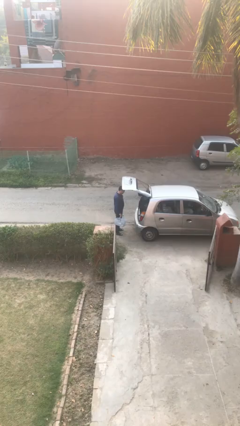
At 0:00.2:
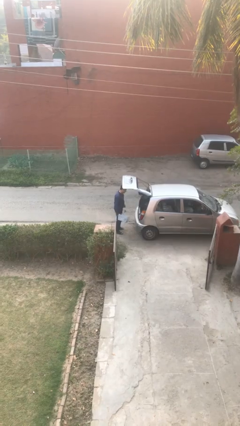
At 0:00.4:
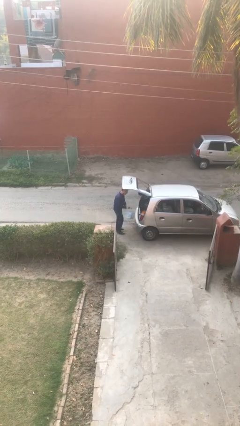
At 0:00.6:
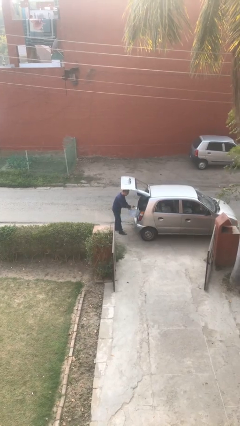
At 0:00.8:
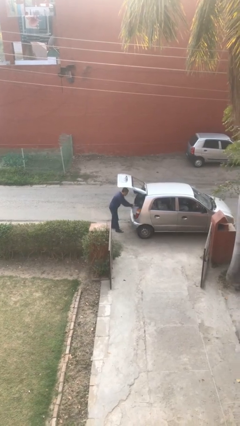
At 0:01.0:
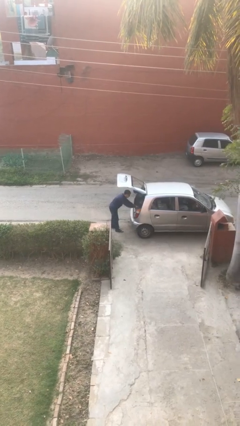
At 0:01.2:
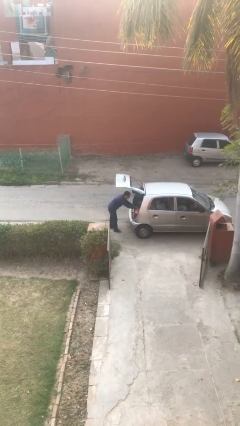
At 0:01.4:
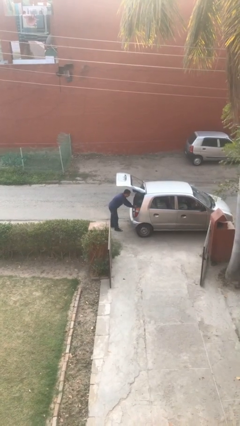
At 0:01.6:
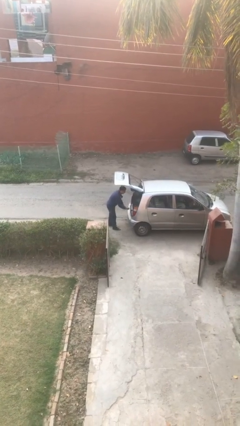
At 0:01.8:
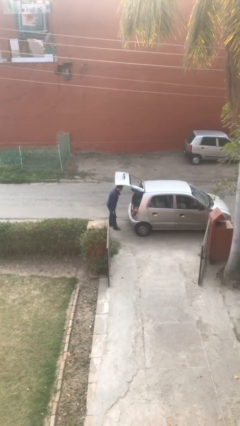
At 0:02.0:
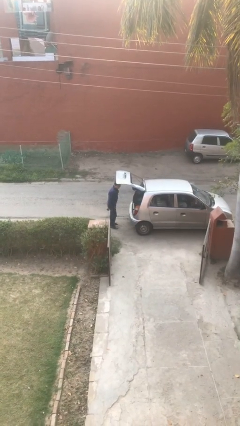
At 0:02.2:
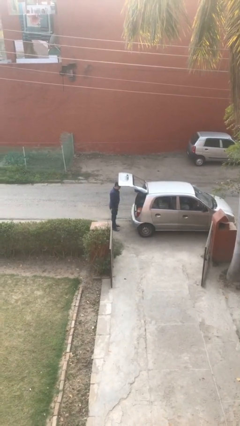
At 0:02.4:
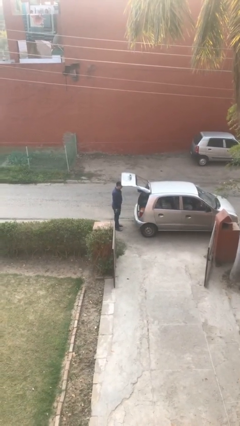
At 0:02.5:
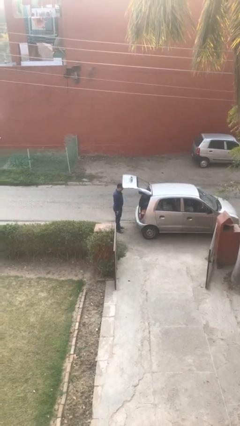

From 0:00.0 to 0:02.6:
person loads car

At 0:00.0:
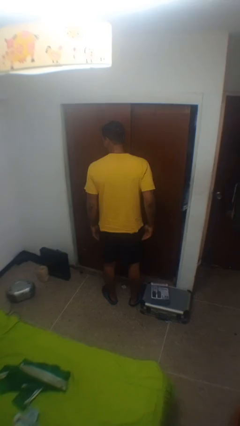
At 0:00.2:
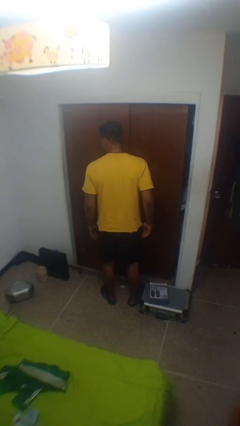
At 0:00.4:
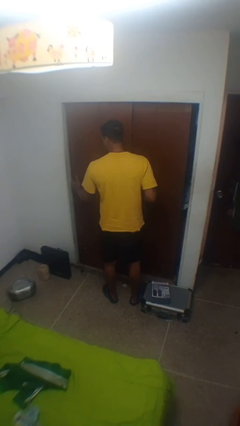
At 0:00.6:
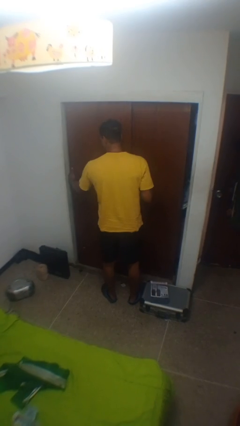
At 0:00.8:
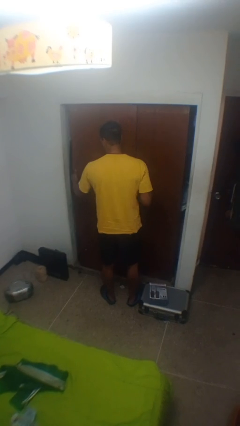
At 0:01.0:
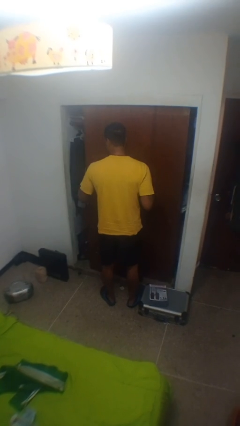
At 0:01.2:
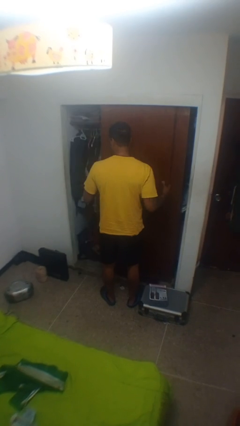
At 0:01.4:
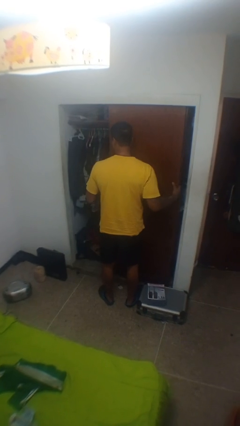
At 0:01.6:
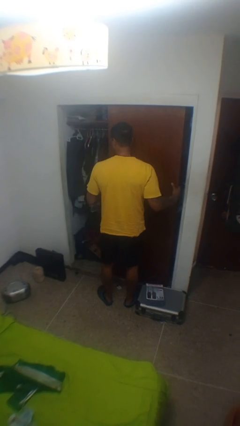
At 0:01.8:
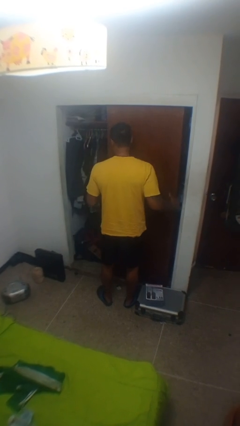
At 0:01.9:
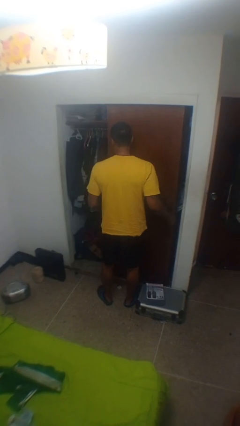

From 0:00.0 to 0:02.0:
person opens closet door

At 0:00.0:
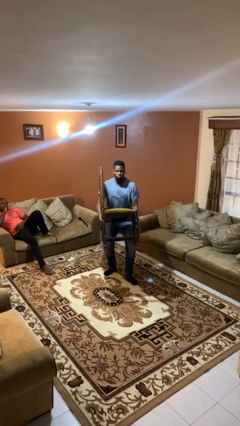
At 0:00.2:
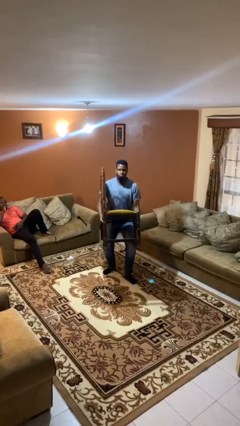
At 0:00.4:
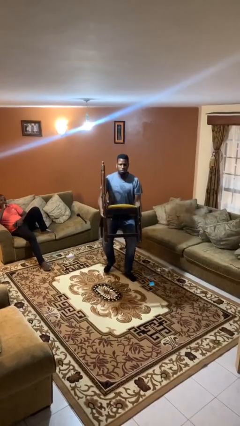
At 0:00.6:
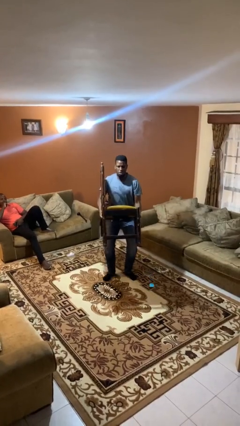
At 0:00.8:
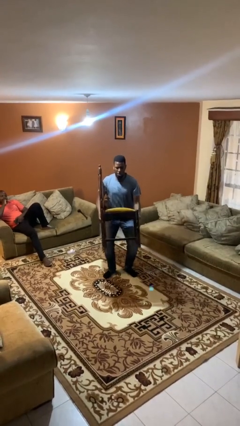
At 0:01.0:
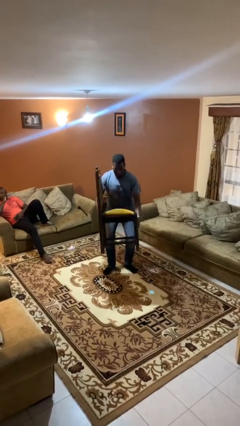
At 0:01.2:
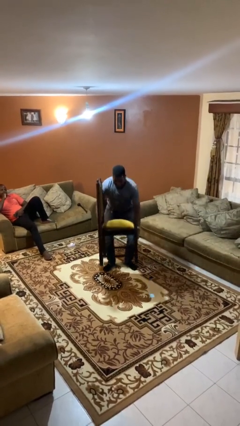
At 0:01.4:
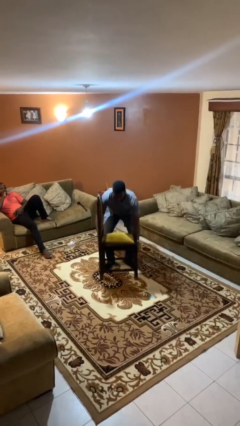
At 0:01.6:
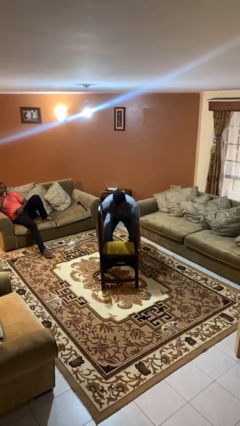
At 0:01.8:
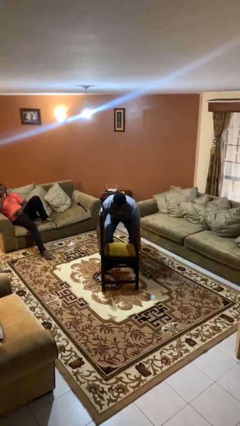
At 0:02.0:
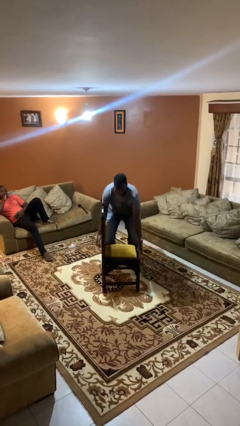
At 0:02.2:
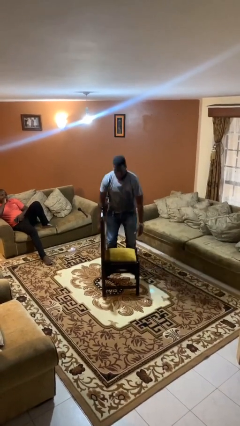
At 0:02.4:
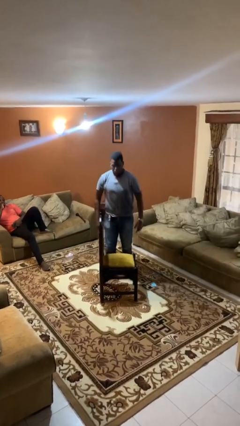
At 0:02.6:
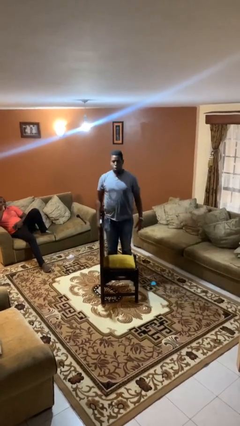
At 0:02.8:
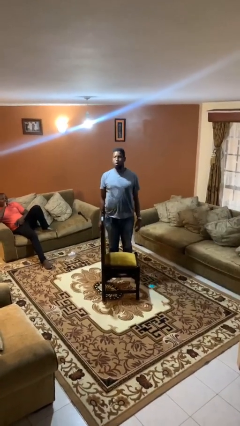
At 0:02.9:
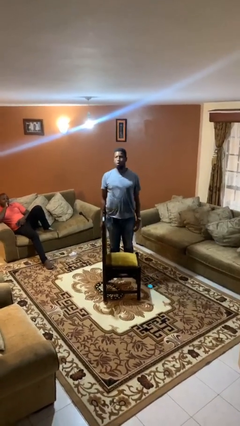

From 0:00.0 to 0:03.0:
person puts down object on floor

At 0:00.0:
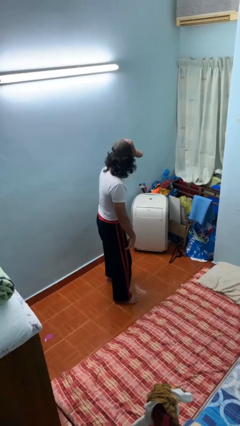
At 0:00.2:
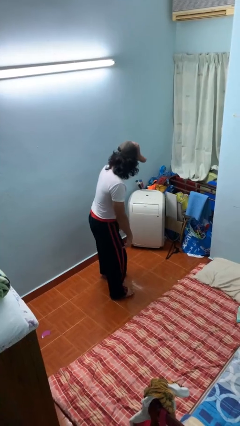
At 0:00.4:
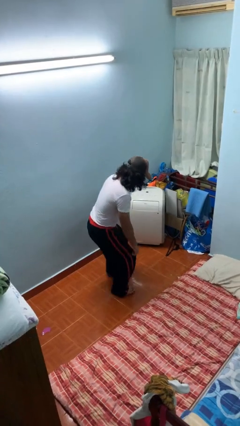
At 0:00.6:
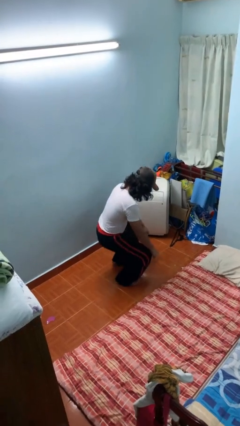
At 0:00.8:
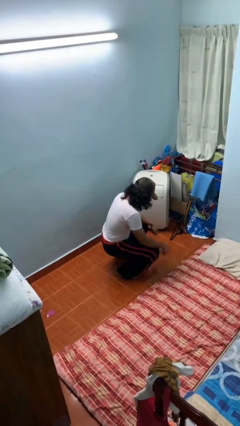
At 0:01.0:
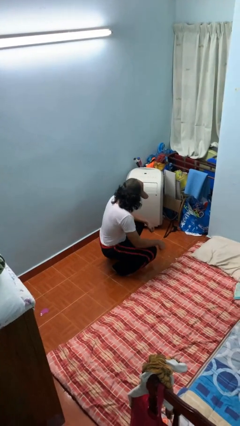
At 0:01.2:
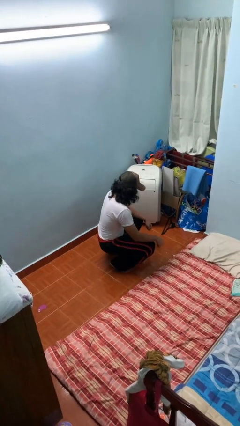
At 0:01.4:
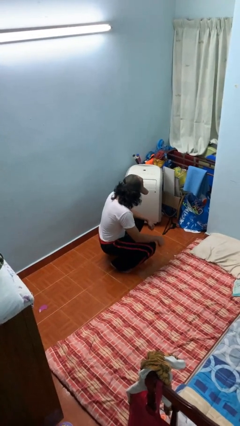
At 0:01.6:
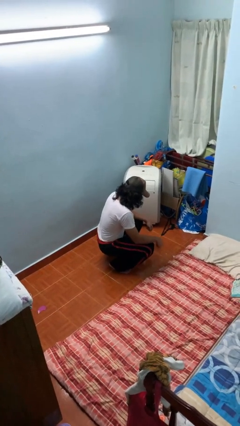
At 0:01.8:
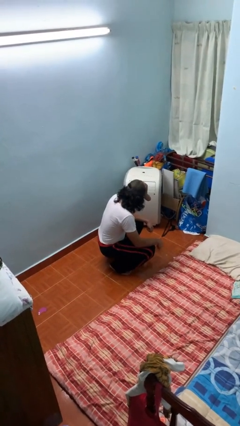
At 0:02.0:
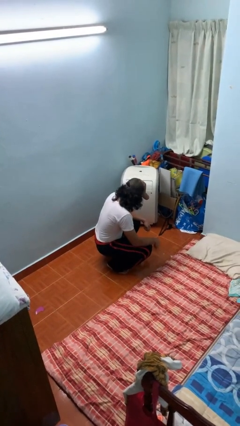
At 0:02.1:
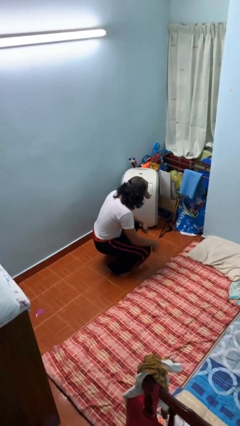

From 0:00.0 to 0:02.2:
person squats

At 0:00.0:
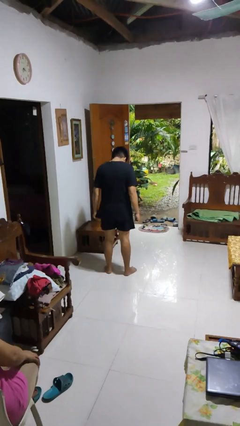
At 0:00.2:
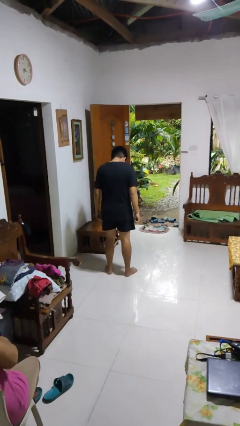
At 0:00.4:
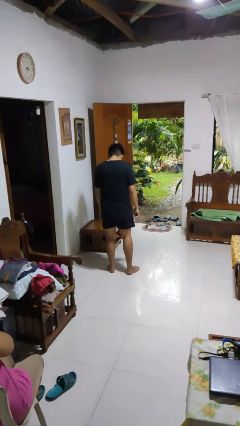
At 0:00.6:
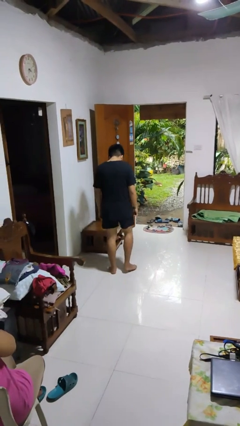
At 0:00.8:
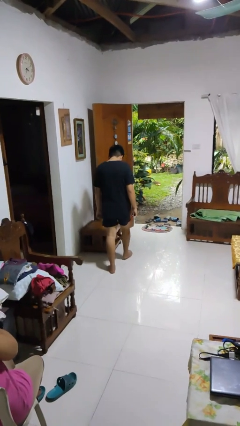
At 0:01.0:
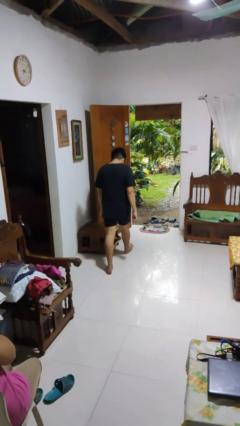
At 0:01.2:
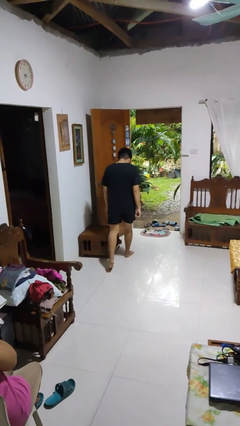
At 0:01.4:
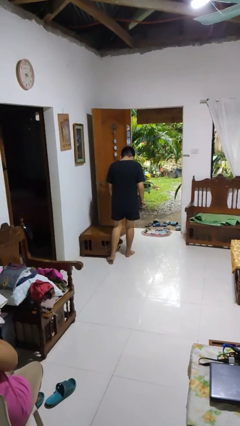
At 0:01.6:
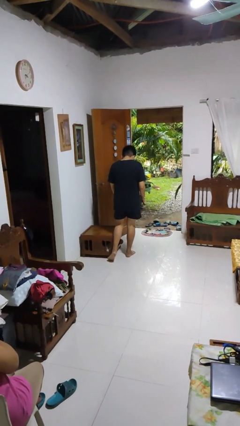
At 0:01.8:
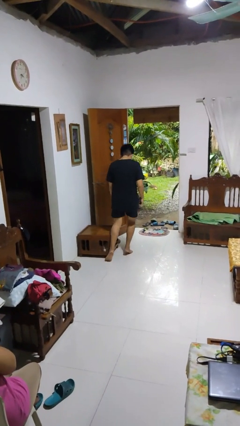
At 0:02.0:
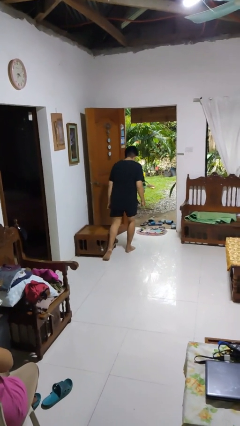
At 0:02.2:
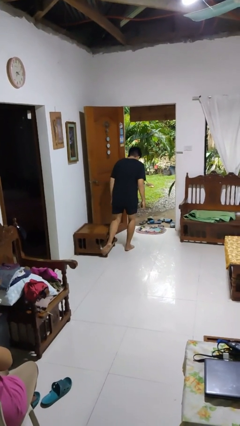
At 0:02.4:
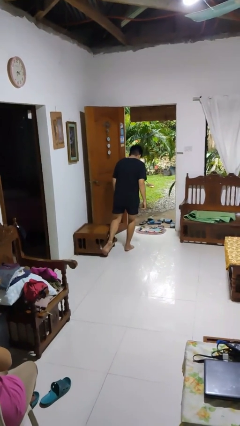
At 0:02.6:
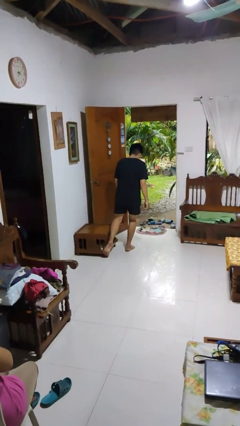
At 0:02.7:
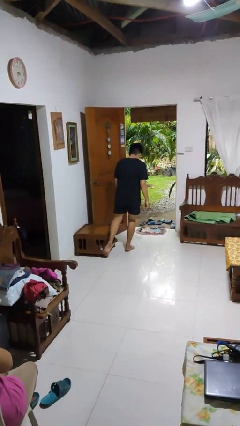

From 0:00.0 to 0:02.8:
person stubs toe

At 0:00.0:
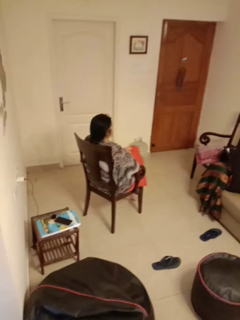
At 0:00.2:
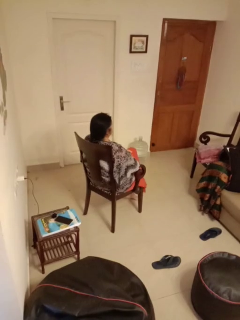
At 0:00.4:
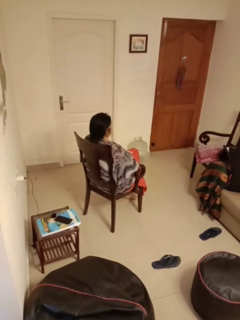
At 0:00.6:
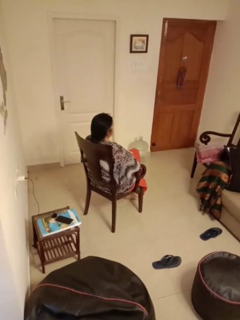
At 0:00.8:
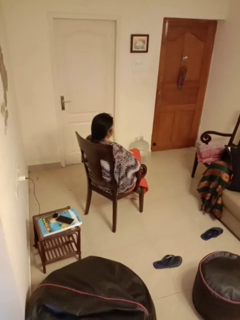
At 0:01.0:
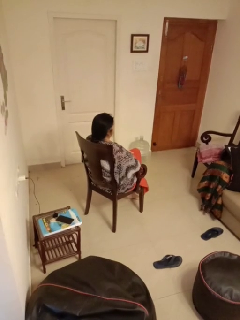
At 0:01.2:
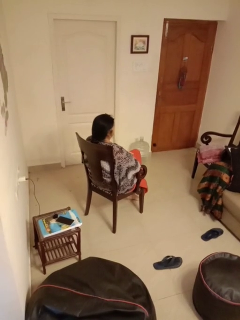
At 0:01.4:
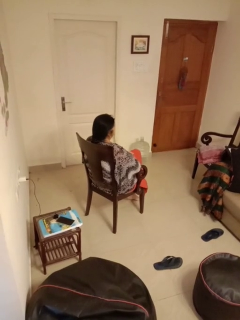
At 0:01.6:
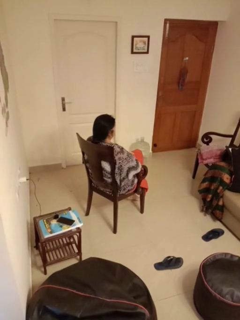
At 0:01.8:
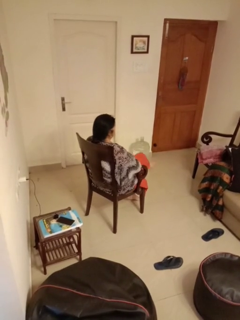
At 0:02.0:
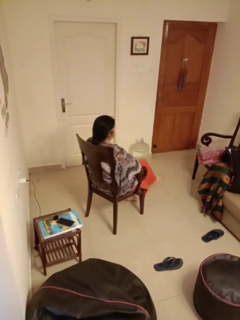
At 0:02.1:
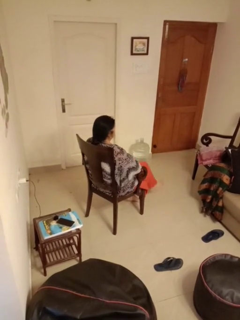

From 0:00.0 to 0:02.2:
person crosses legs

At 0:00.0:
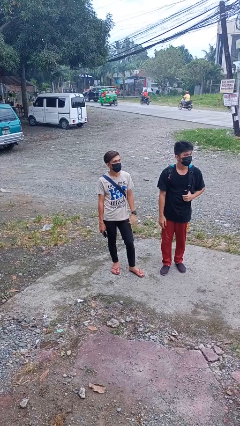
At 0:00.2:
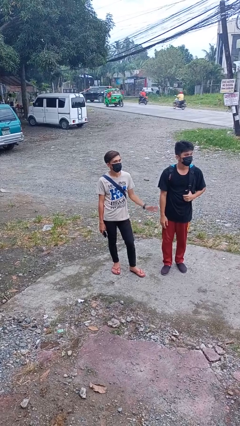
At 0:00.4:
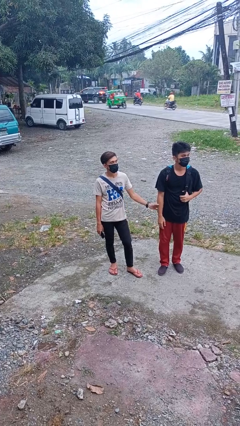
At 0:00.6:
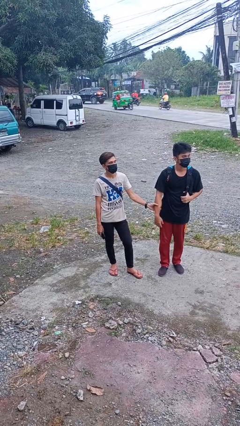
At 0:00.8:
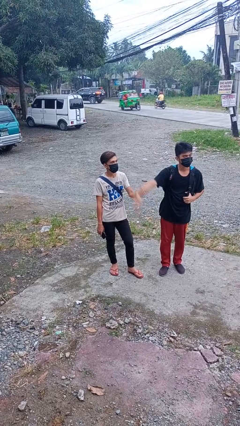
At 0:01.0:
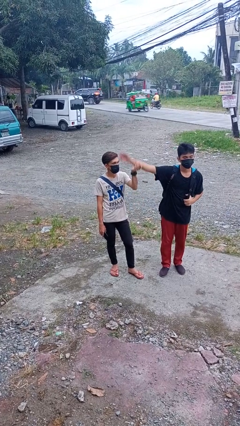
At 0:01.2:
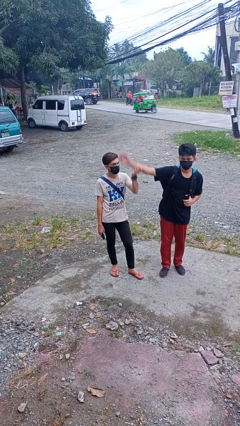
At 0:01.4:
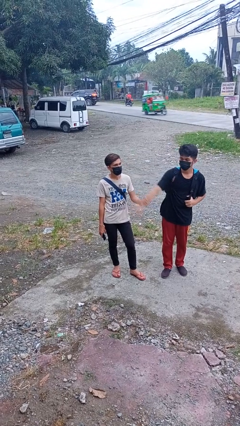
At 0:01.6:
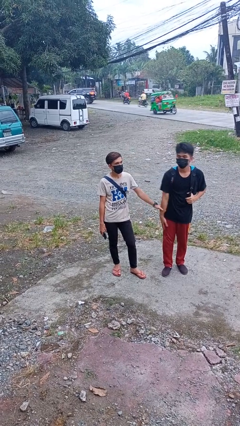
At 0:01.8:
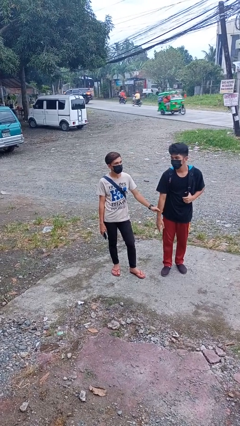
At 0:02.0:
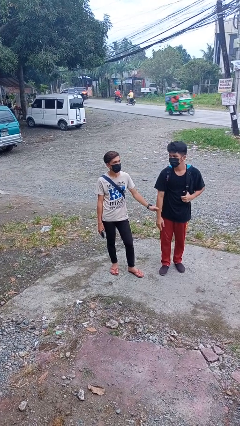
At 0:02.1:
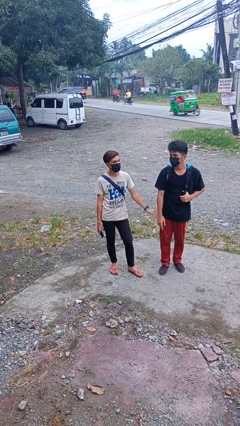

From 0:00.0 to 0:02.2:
person grabs person by forearm

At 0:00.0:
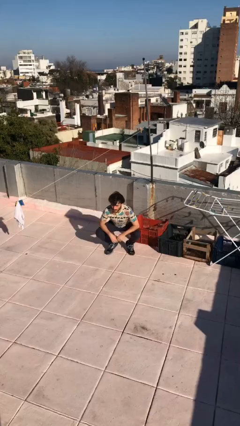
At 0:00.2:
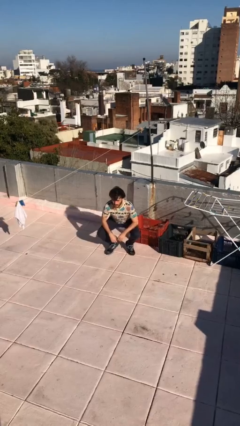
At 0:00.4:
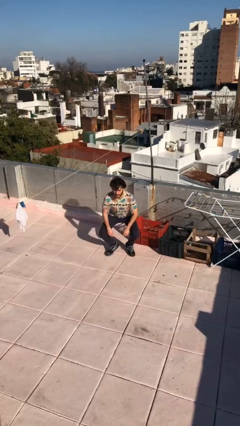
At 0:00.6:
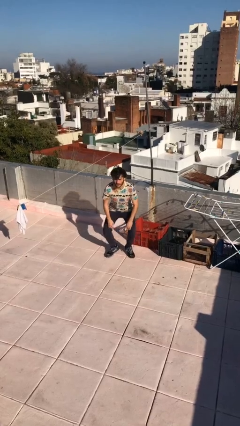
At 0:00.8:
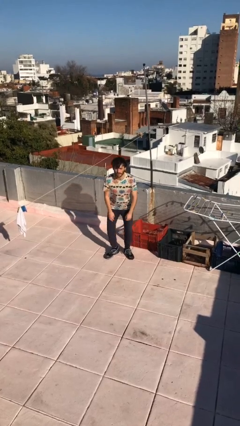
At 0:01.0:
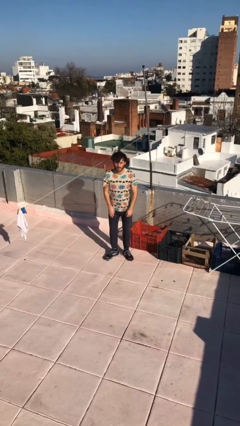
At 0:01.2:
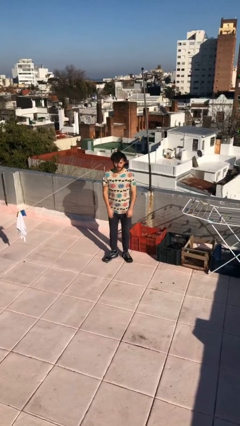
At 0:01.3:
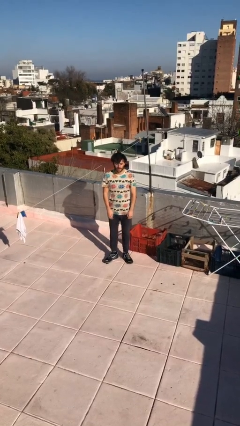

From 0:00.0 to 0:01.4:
person stands up
